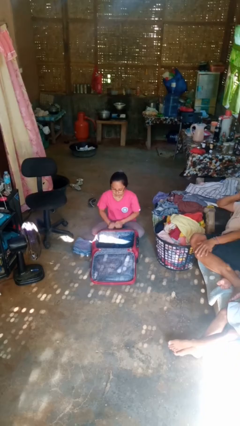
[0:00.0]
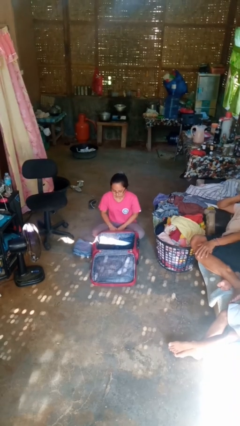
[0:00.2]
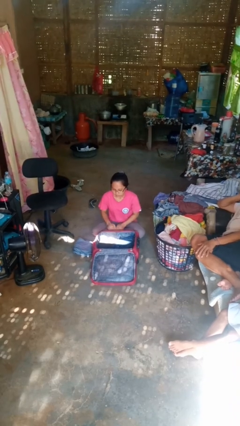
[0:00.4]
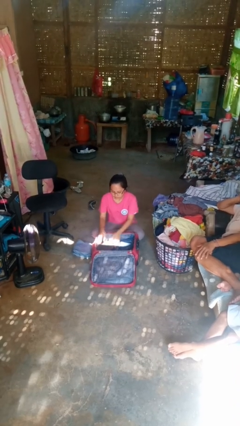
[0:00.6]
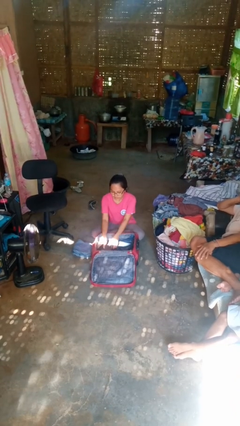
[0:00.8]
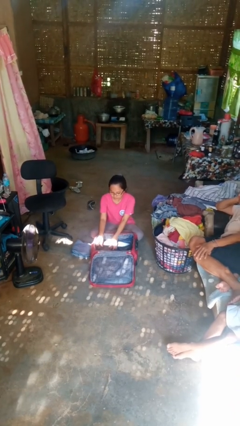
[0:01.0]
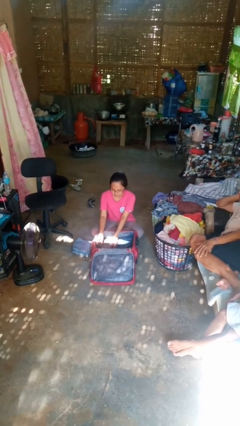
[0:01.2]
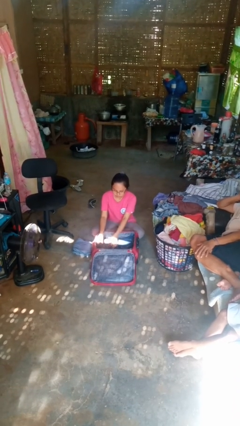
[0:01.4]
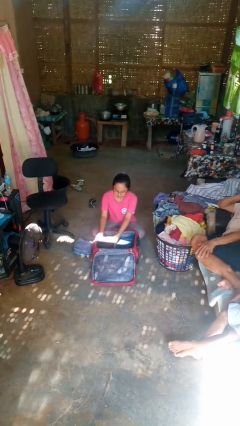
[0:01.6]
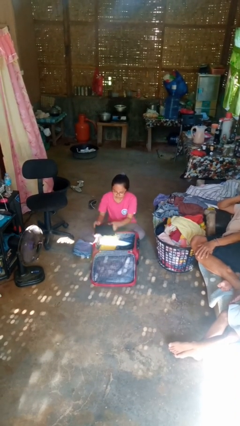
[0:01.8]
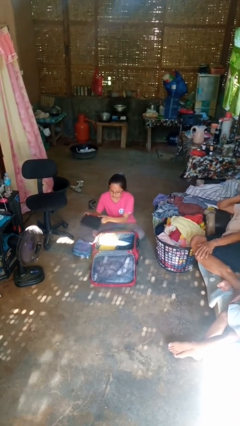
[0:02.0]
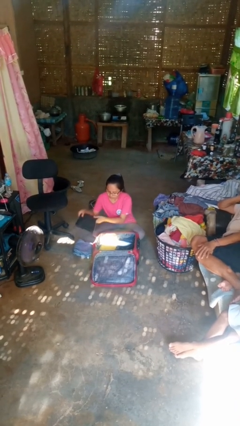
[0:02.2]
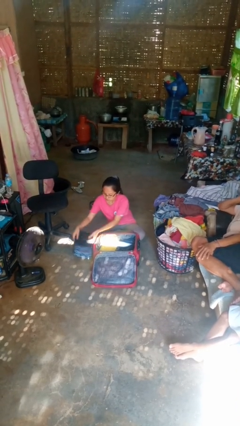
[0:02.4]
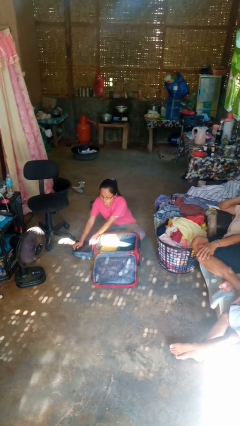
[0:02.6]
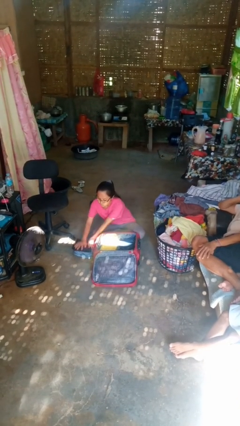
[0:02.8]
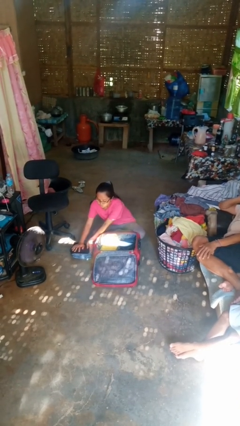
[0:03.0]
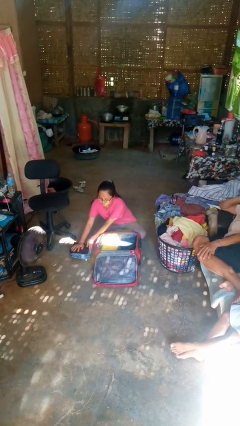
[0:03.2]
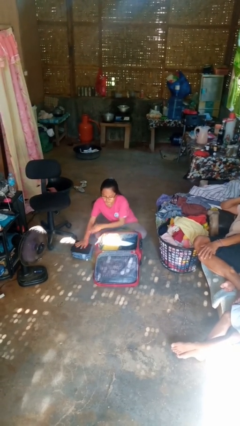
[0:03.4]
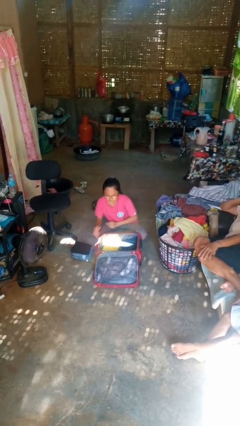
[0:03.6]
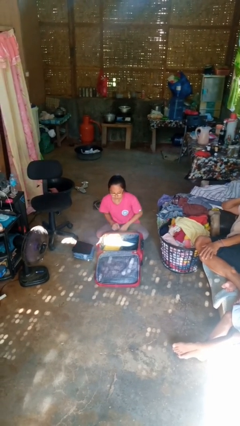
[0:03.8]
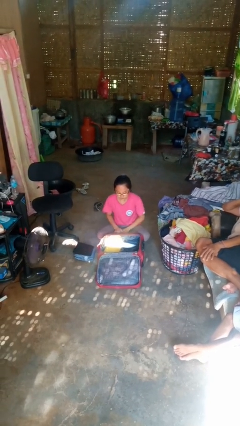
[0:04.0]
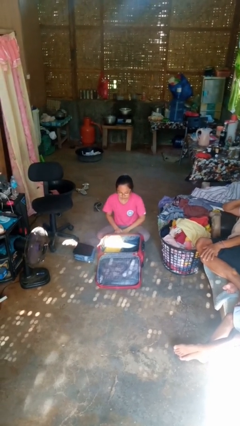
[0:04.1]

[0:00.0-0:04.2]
person unloads clothes from suitcase

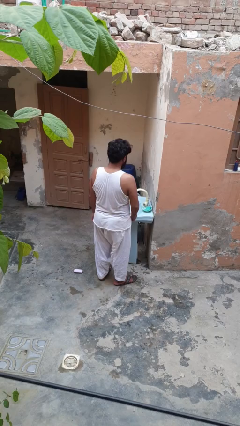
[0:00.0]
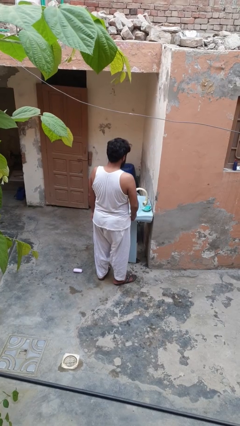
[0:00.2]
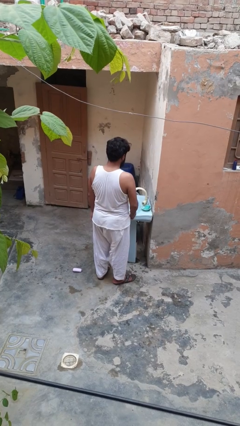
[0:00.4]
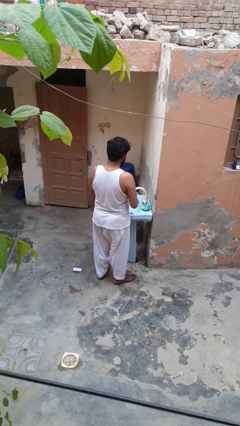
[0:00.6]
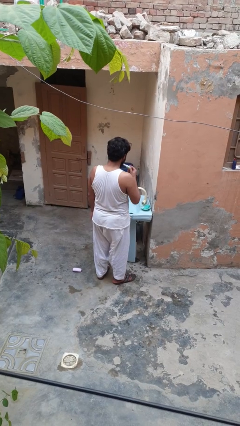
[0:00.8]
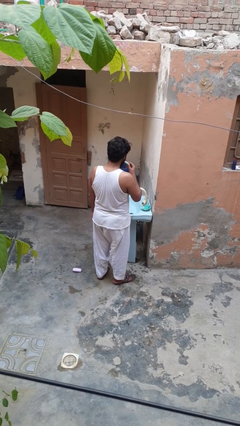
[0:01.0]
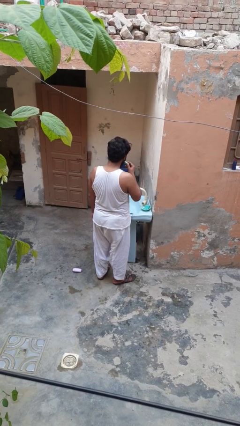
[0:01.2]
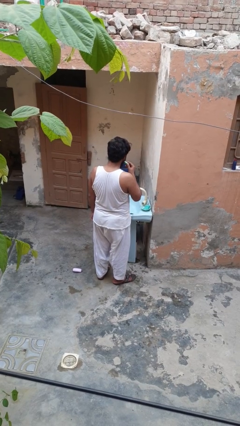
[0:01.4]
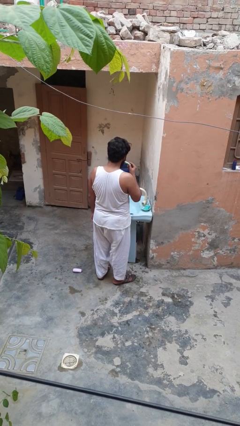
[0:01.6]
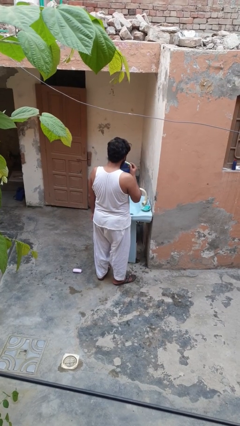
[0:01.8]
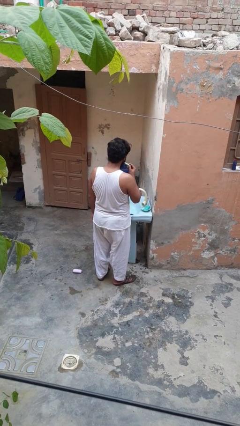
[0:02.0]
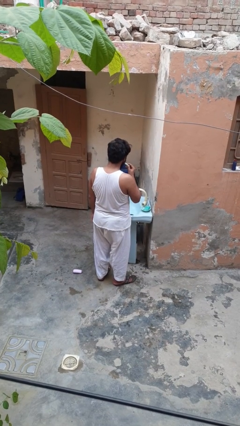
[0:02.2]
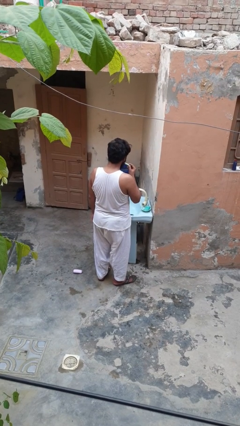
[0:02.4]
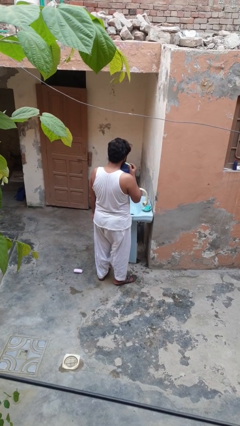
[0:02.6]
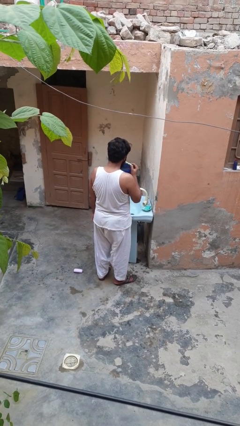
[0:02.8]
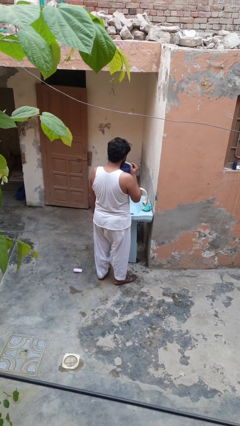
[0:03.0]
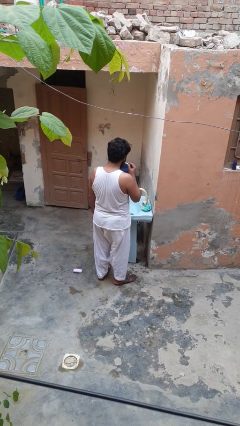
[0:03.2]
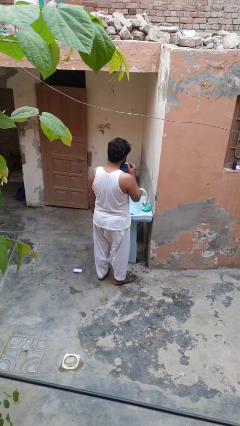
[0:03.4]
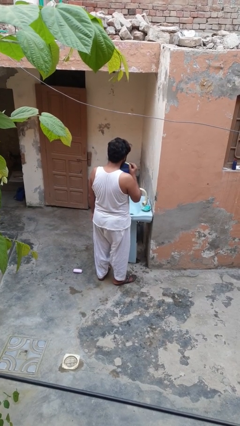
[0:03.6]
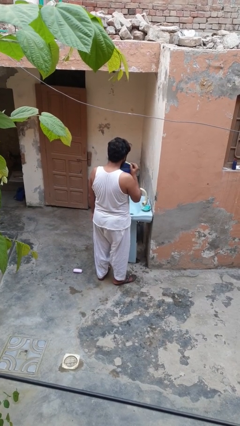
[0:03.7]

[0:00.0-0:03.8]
person brushes teeth

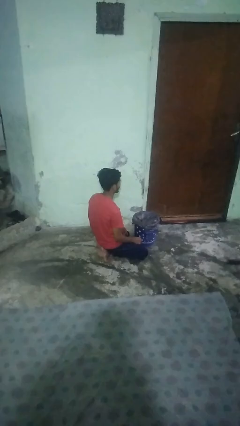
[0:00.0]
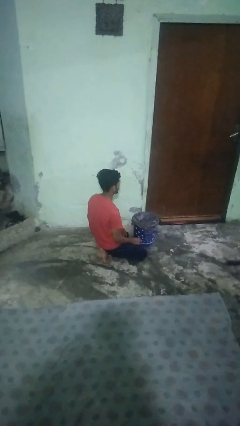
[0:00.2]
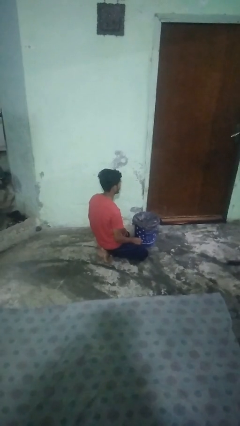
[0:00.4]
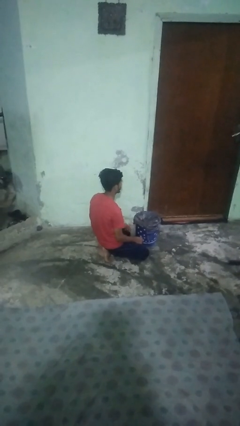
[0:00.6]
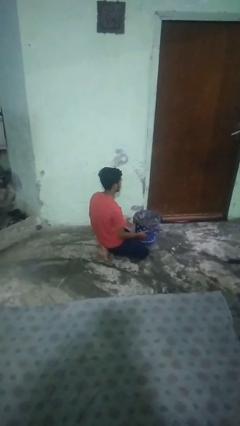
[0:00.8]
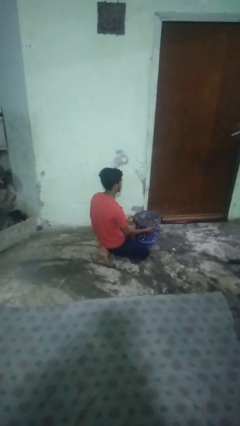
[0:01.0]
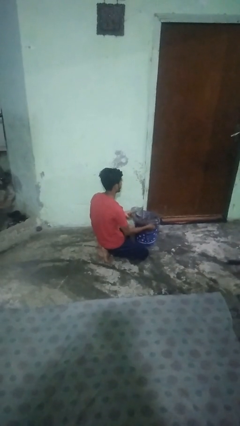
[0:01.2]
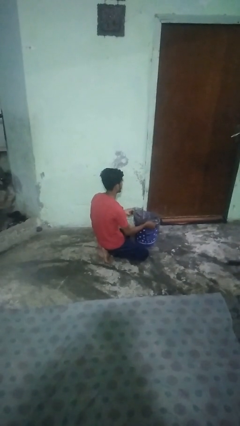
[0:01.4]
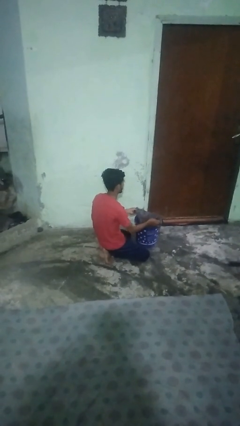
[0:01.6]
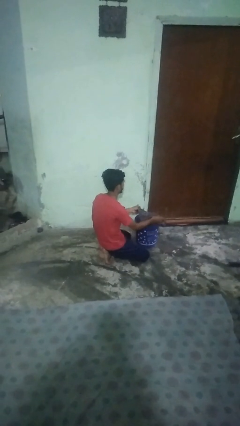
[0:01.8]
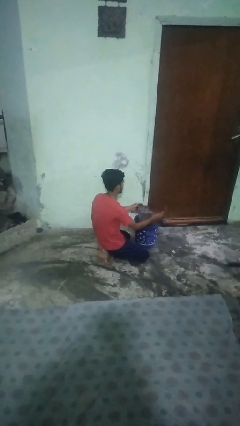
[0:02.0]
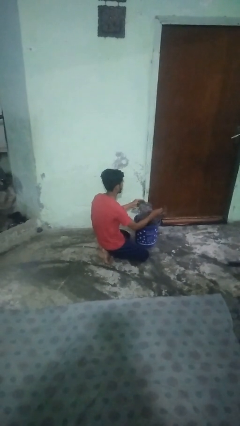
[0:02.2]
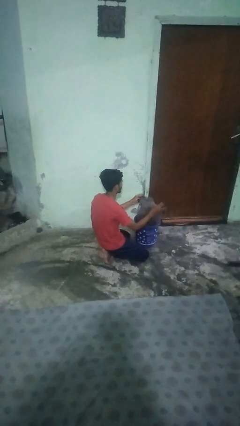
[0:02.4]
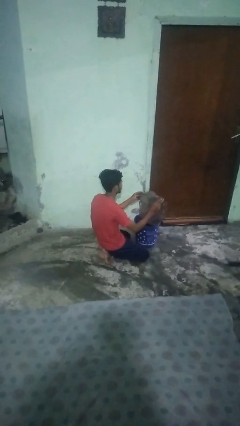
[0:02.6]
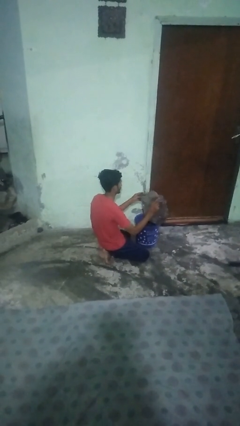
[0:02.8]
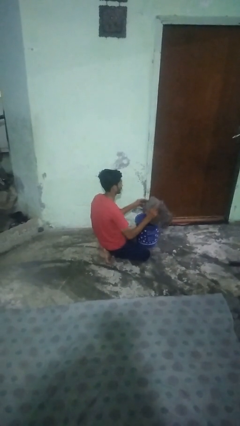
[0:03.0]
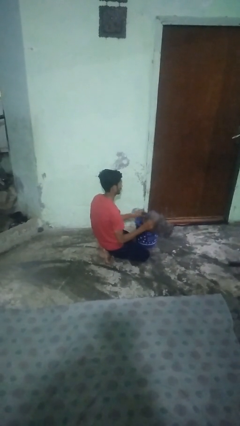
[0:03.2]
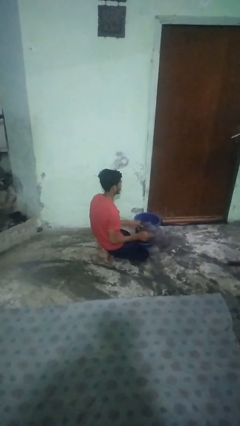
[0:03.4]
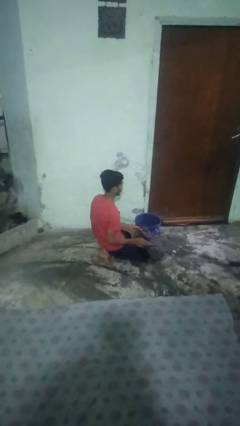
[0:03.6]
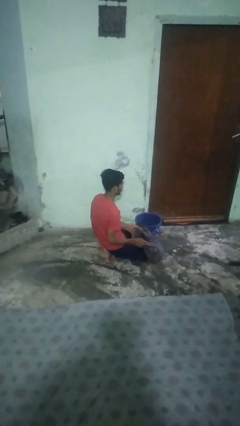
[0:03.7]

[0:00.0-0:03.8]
person removes trashbag from trashcan

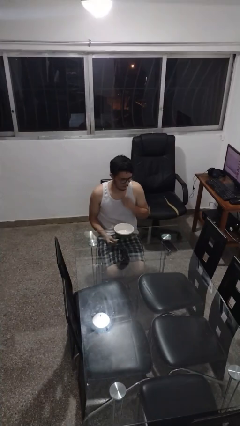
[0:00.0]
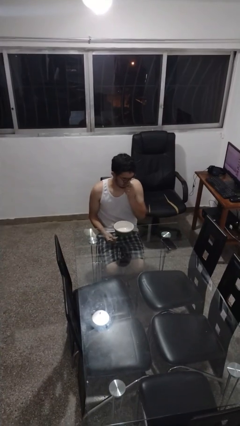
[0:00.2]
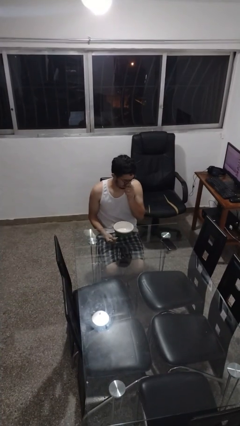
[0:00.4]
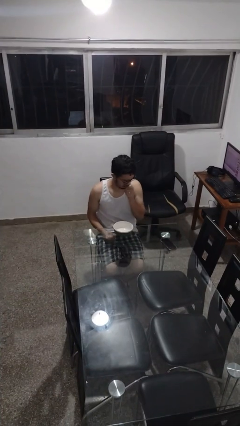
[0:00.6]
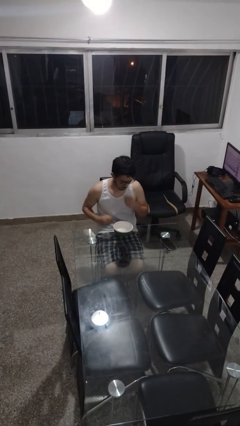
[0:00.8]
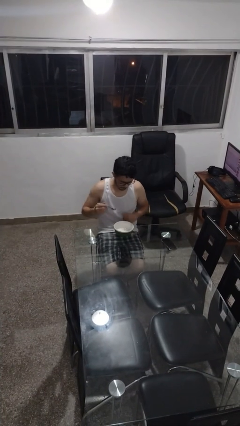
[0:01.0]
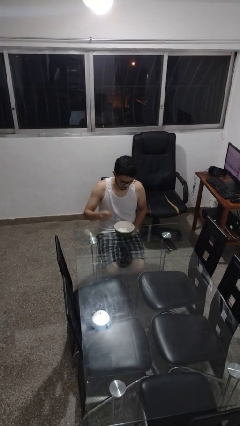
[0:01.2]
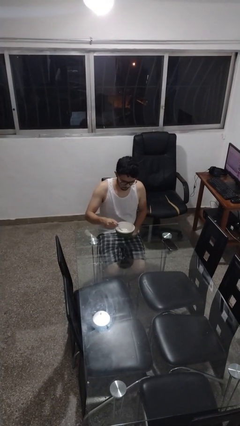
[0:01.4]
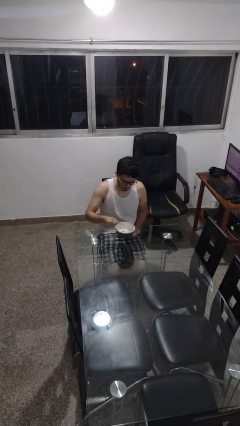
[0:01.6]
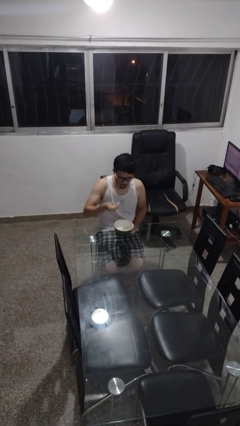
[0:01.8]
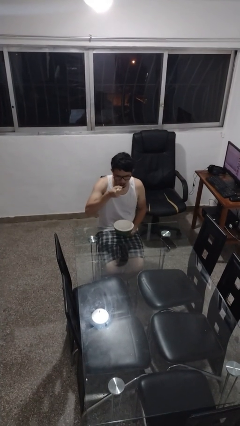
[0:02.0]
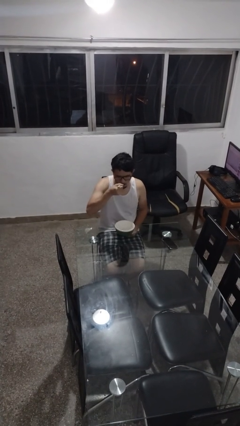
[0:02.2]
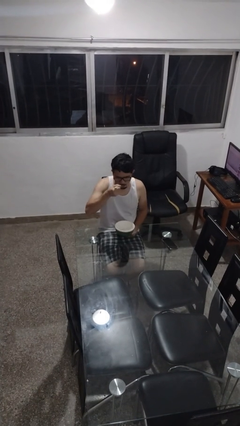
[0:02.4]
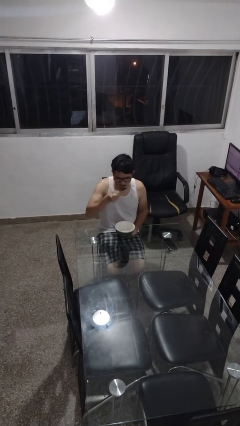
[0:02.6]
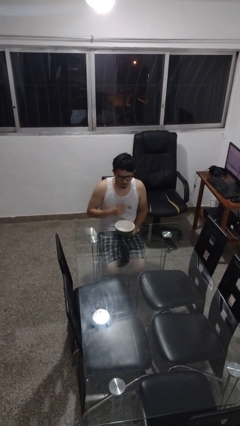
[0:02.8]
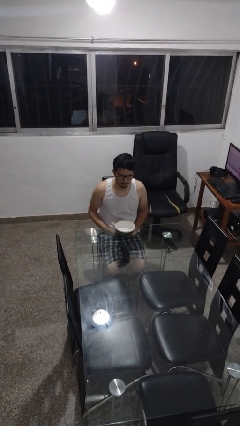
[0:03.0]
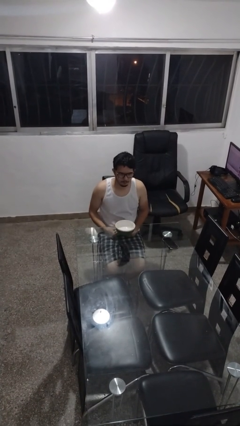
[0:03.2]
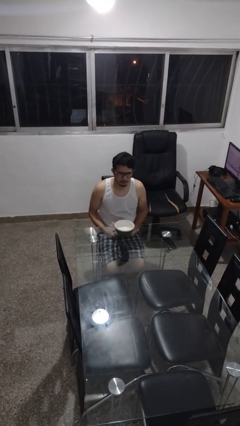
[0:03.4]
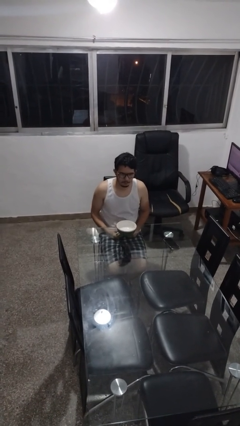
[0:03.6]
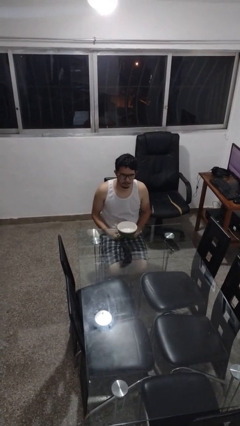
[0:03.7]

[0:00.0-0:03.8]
person eats with utensil

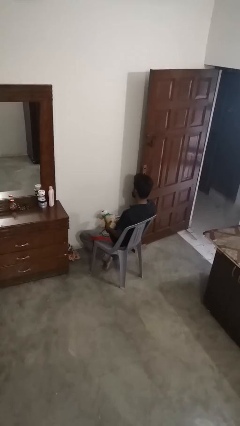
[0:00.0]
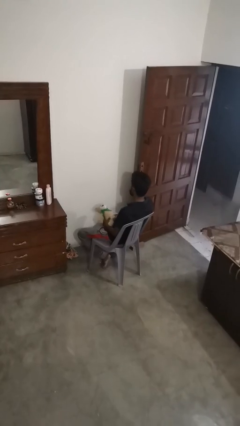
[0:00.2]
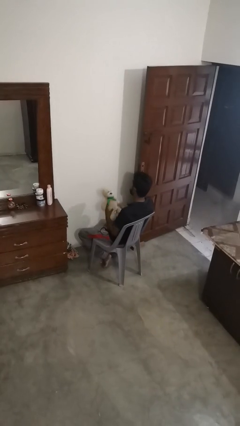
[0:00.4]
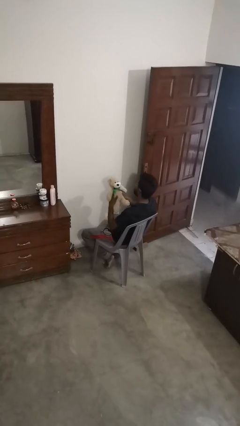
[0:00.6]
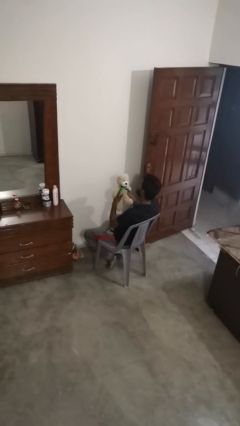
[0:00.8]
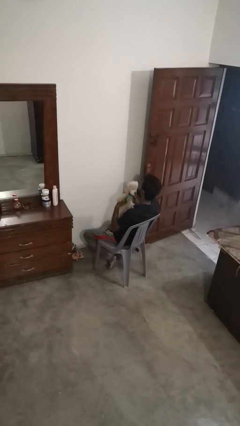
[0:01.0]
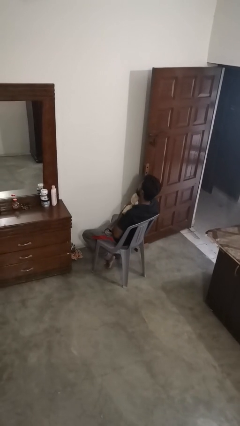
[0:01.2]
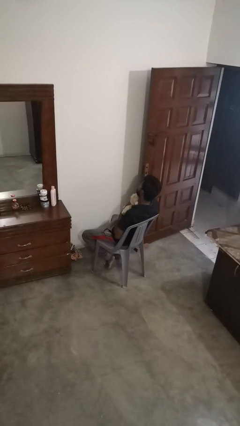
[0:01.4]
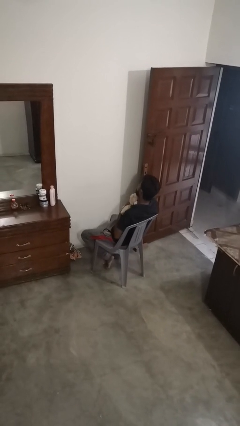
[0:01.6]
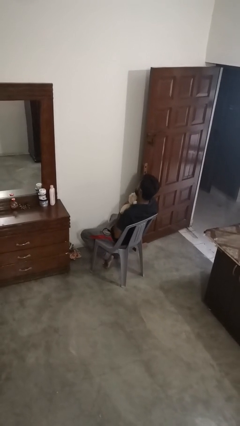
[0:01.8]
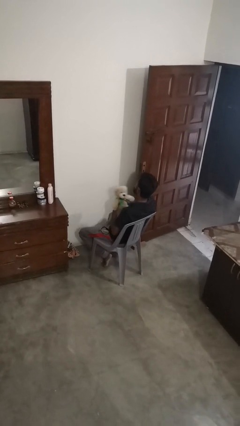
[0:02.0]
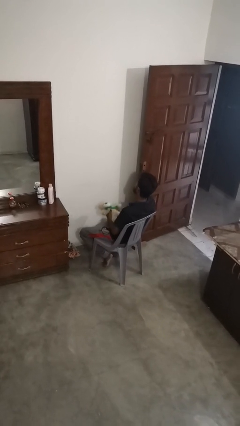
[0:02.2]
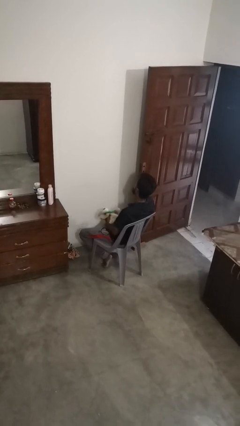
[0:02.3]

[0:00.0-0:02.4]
person hugs stuffed animal
